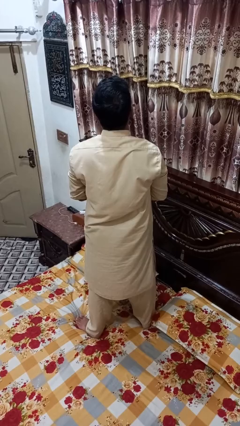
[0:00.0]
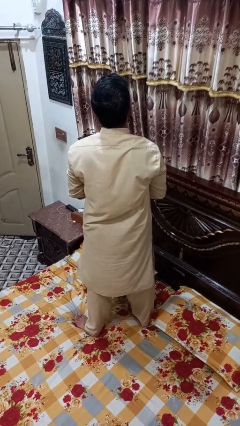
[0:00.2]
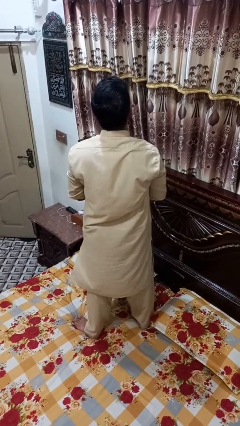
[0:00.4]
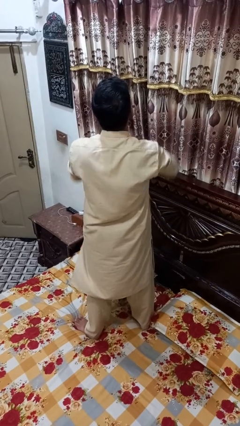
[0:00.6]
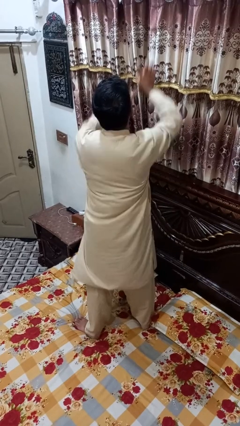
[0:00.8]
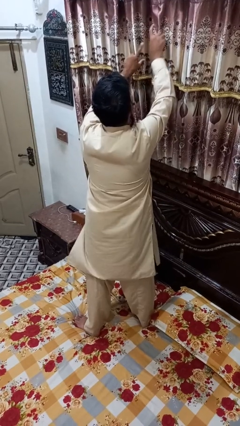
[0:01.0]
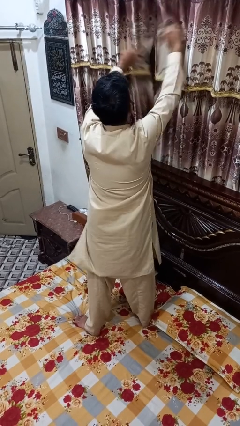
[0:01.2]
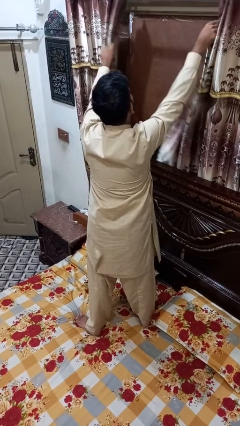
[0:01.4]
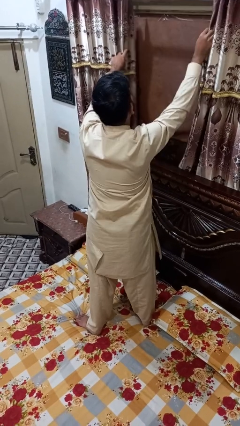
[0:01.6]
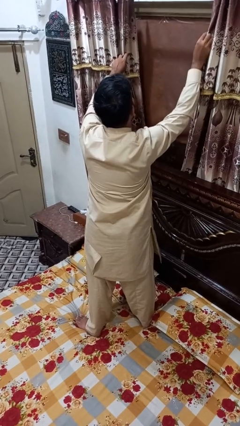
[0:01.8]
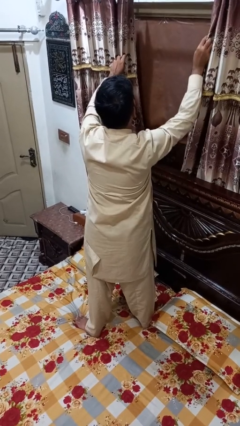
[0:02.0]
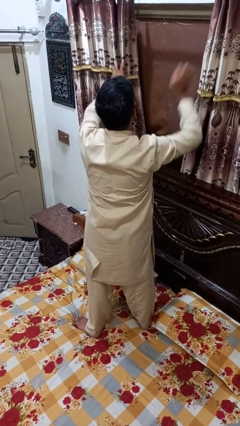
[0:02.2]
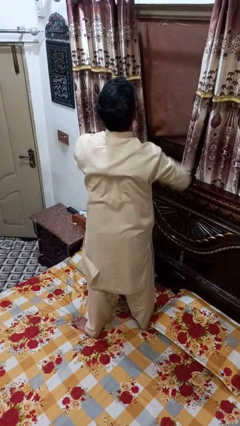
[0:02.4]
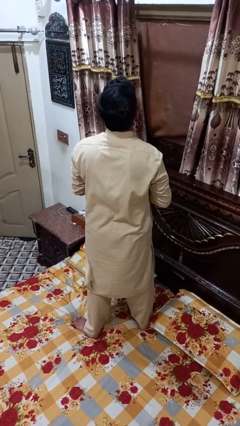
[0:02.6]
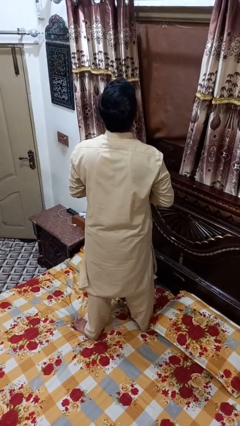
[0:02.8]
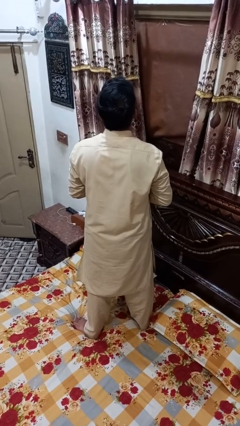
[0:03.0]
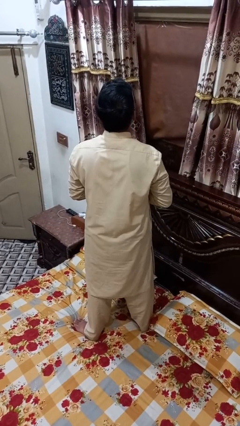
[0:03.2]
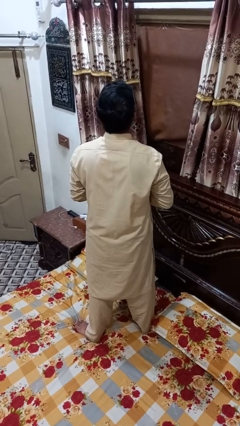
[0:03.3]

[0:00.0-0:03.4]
person opens curtains

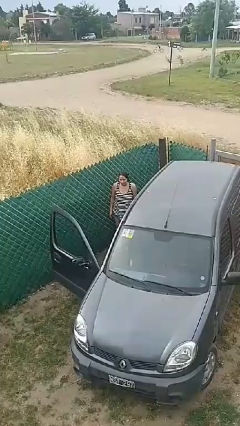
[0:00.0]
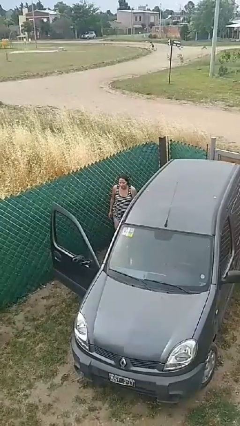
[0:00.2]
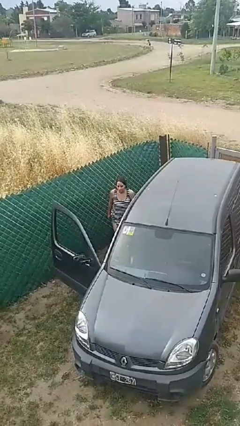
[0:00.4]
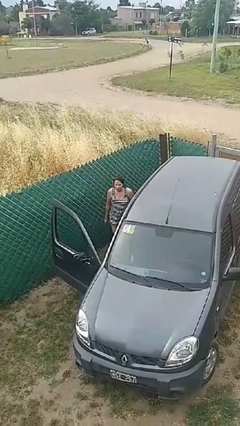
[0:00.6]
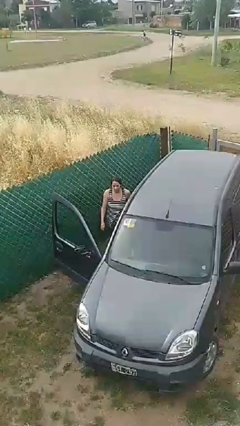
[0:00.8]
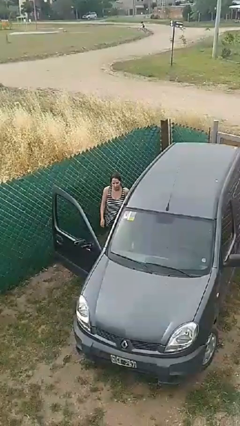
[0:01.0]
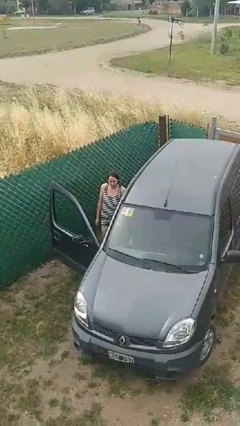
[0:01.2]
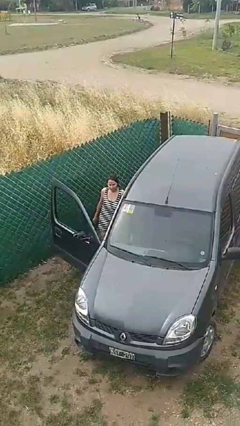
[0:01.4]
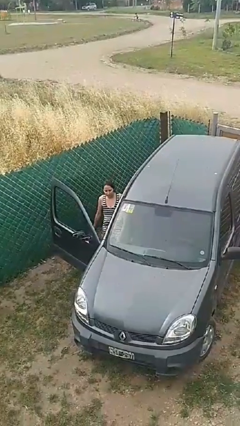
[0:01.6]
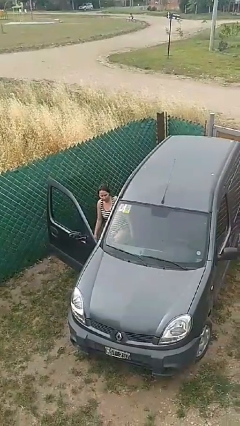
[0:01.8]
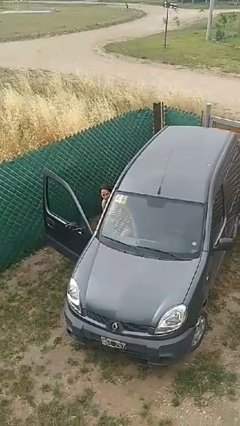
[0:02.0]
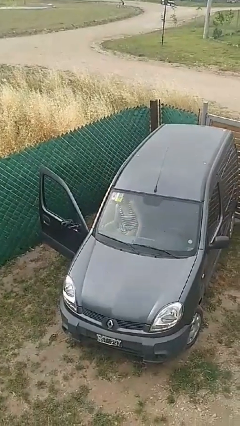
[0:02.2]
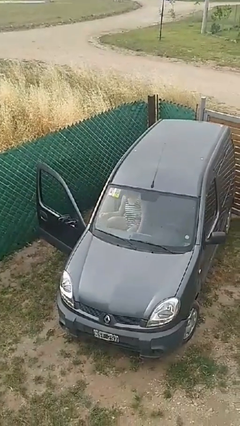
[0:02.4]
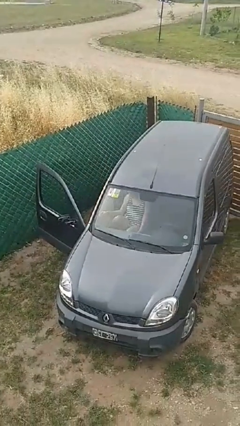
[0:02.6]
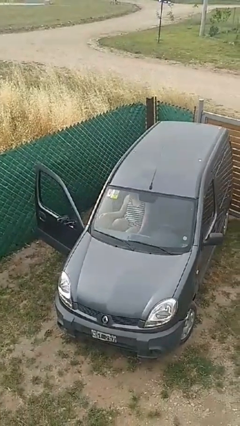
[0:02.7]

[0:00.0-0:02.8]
person enters car

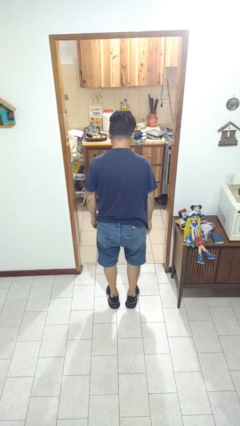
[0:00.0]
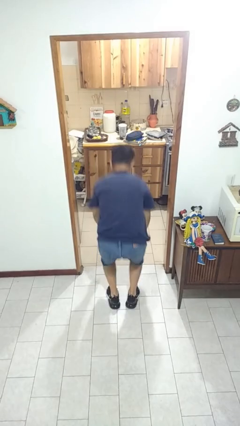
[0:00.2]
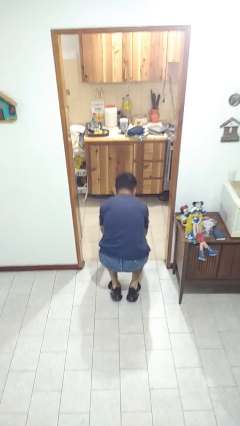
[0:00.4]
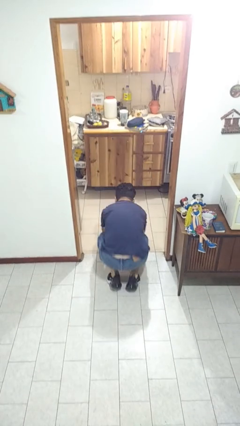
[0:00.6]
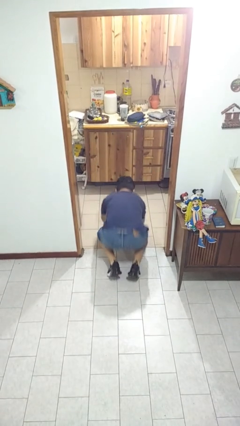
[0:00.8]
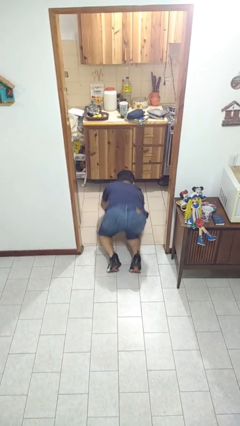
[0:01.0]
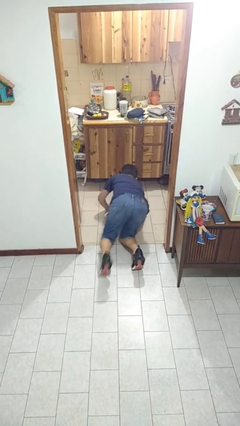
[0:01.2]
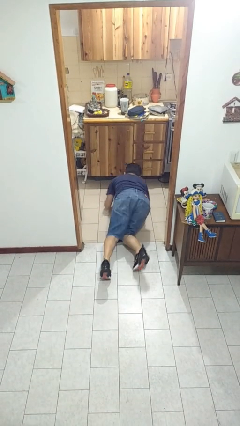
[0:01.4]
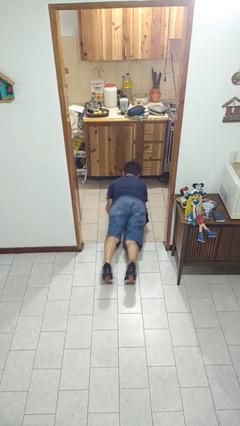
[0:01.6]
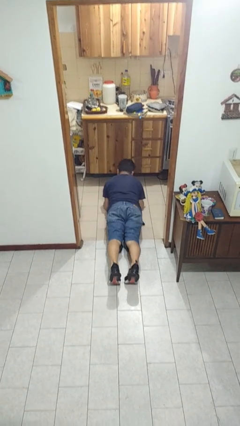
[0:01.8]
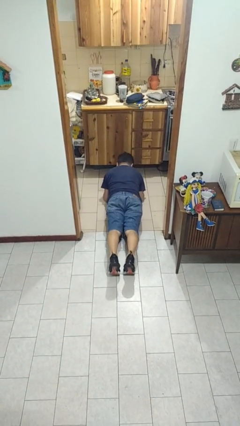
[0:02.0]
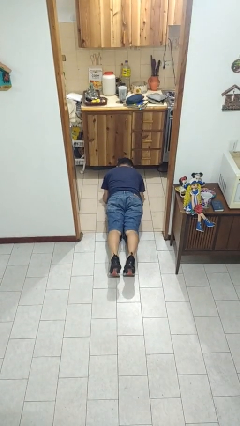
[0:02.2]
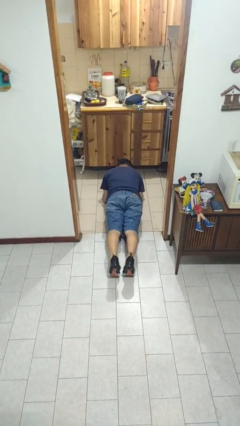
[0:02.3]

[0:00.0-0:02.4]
person exercises with plank

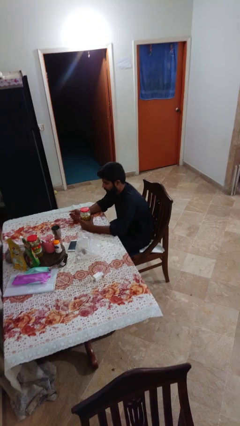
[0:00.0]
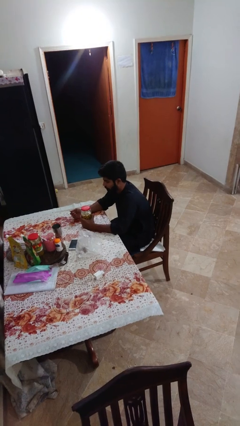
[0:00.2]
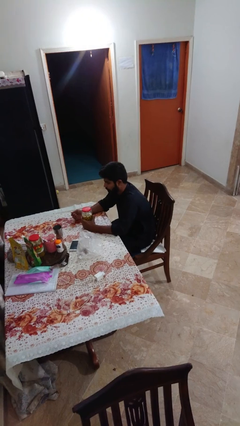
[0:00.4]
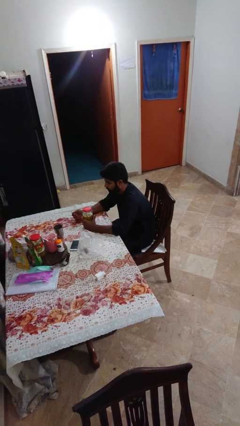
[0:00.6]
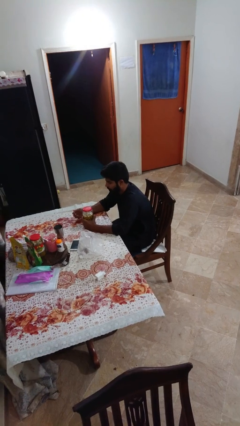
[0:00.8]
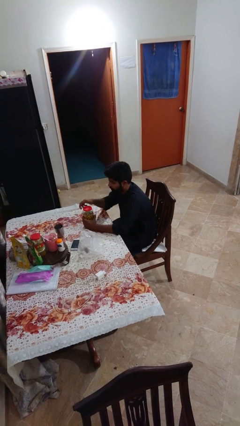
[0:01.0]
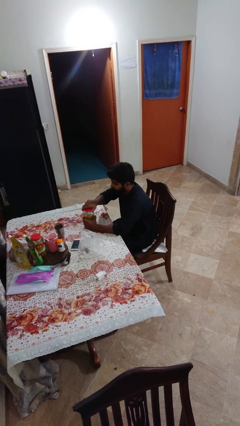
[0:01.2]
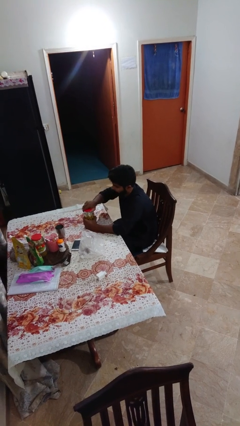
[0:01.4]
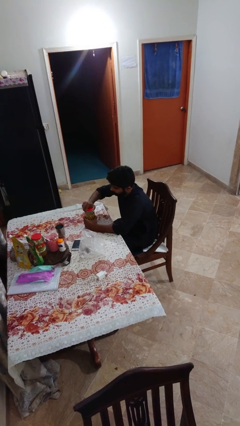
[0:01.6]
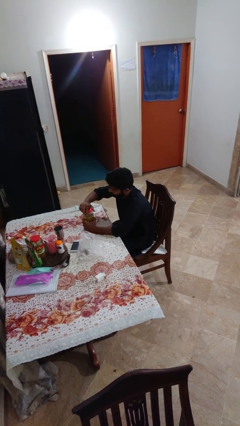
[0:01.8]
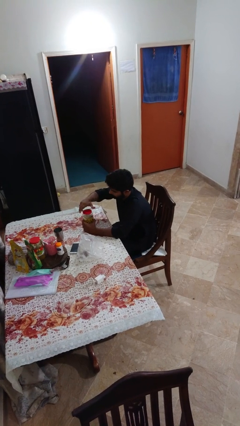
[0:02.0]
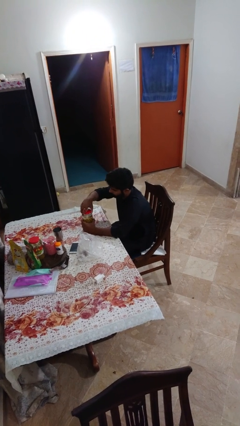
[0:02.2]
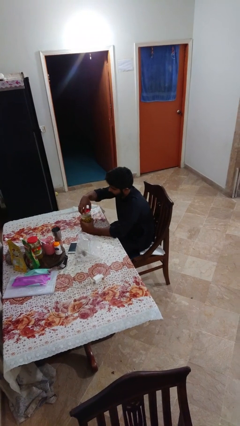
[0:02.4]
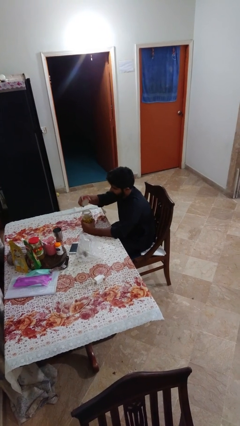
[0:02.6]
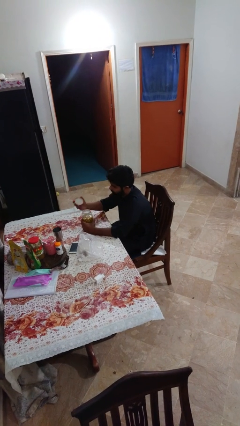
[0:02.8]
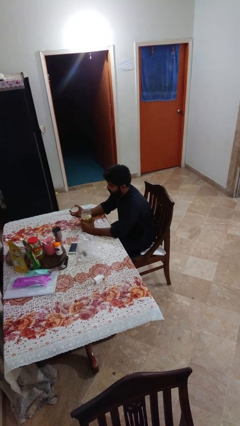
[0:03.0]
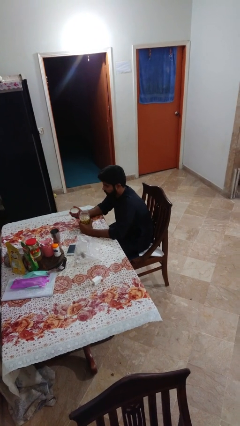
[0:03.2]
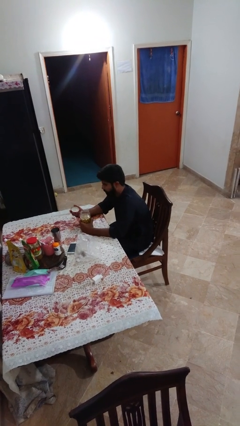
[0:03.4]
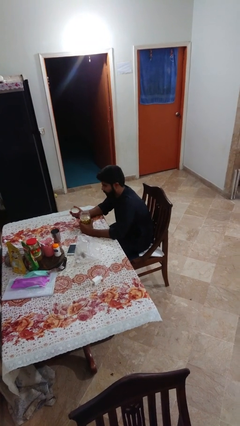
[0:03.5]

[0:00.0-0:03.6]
person opens jar

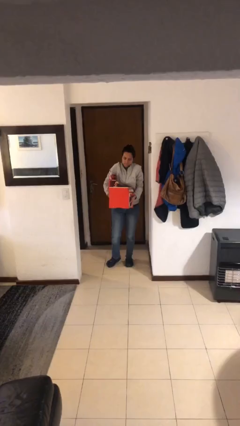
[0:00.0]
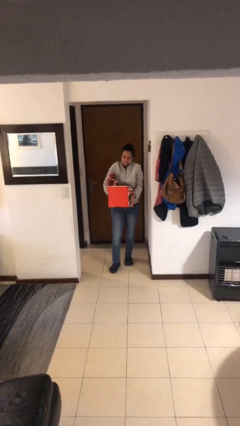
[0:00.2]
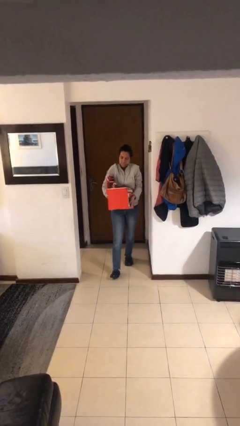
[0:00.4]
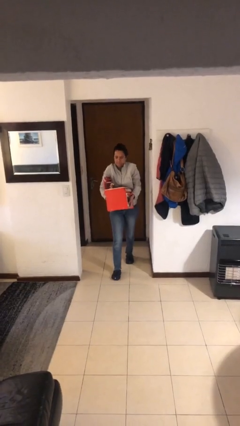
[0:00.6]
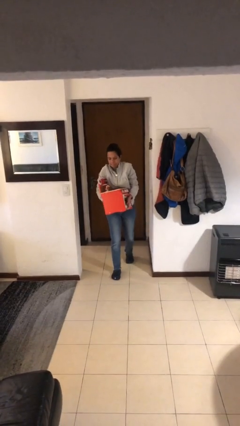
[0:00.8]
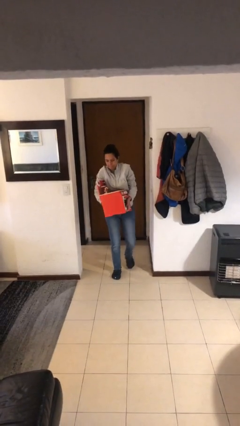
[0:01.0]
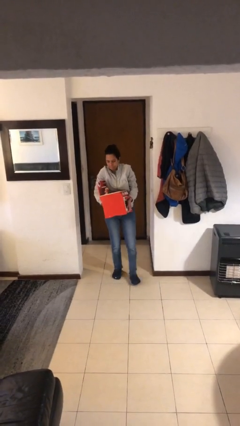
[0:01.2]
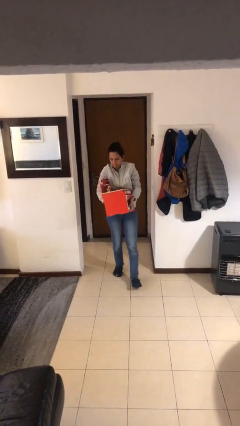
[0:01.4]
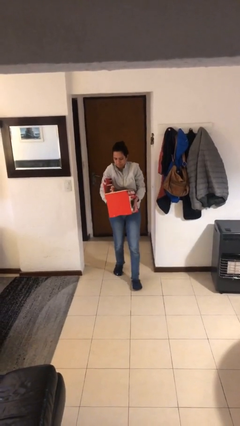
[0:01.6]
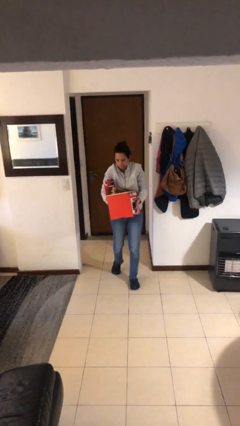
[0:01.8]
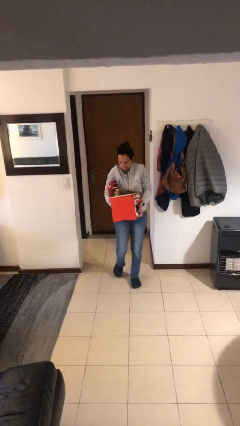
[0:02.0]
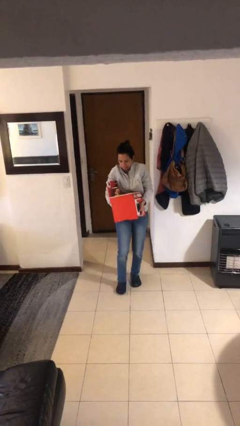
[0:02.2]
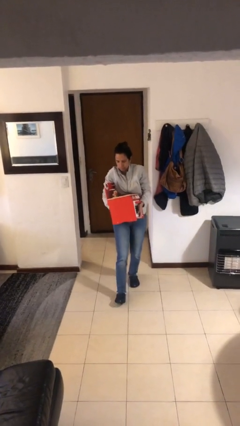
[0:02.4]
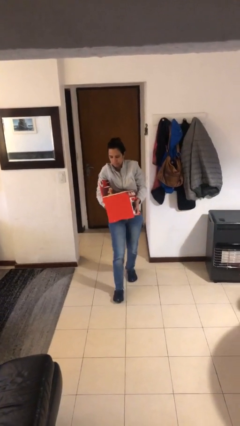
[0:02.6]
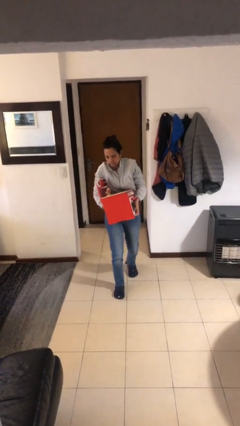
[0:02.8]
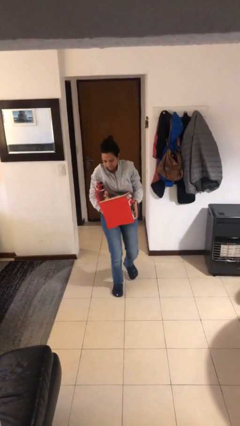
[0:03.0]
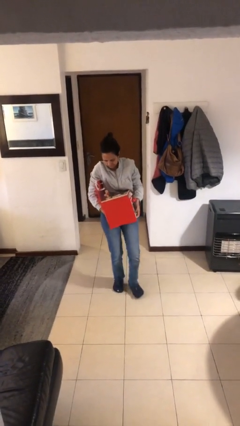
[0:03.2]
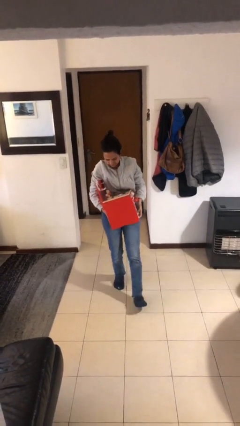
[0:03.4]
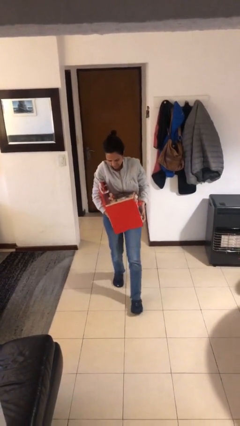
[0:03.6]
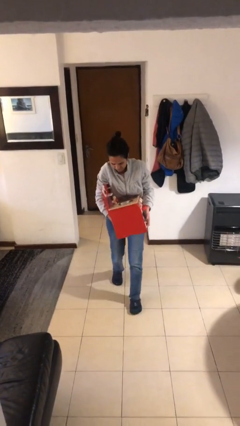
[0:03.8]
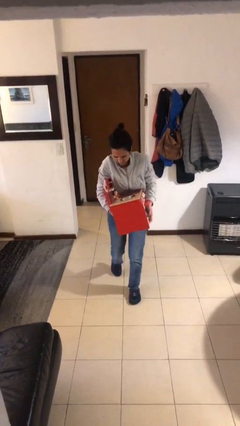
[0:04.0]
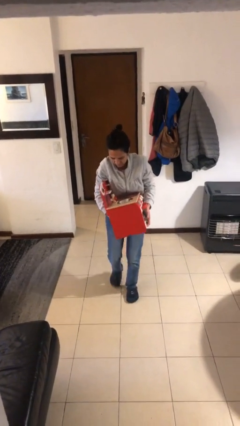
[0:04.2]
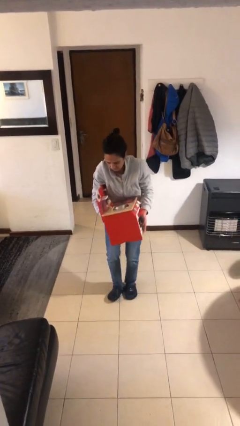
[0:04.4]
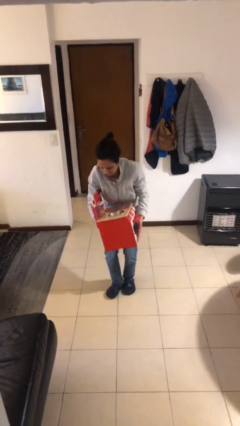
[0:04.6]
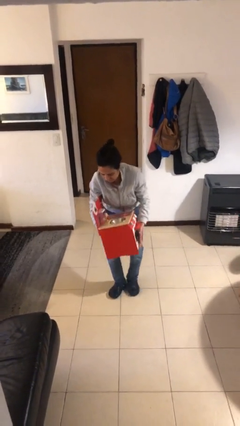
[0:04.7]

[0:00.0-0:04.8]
person carries heavy object

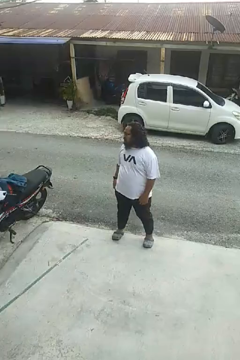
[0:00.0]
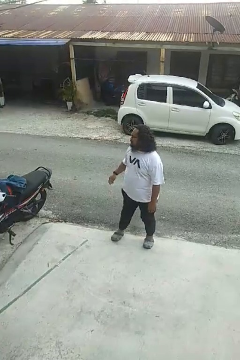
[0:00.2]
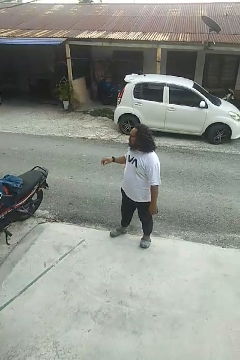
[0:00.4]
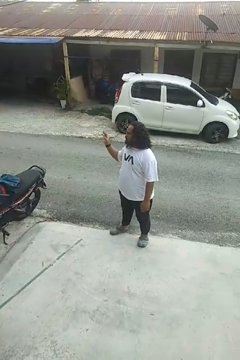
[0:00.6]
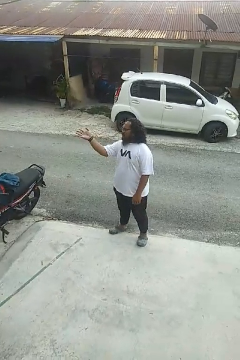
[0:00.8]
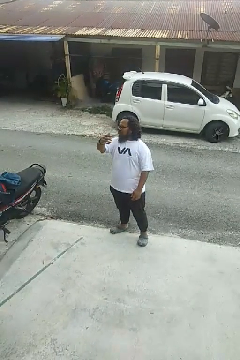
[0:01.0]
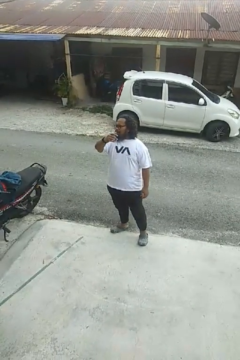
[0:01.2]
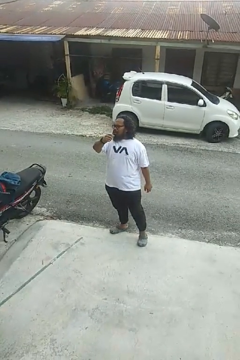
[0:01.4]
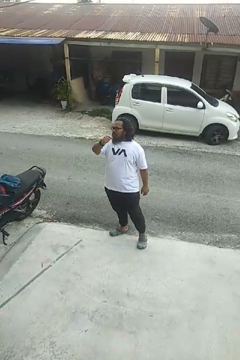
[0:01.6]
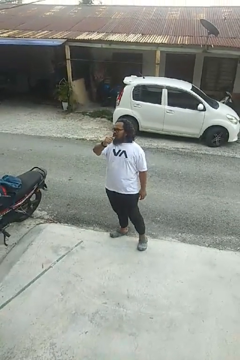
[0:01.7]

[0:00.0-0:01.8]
person gestures swipe left
